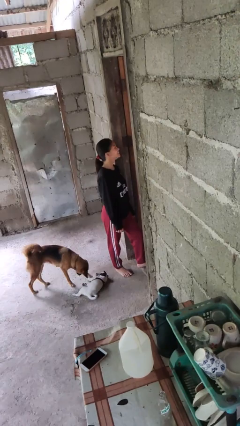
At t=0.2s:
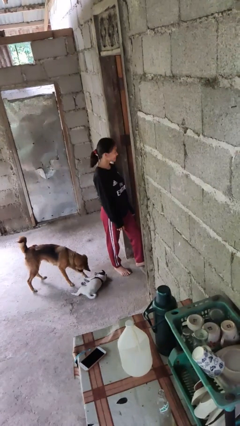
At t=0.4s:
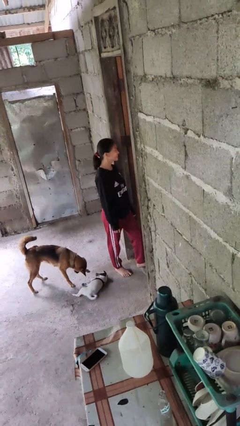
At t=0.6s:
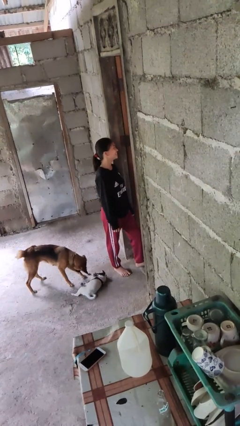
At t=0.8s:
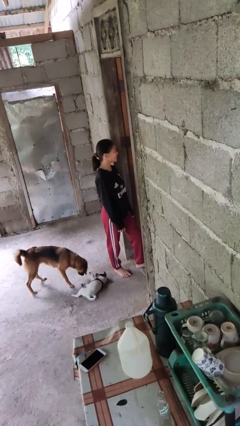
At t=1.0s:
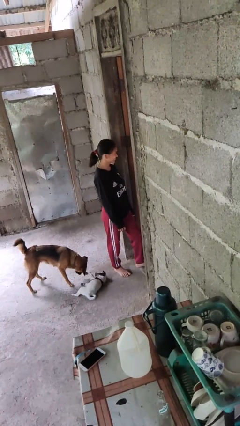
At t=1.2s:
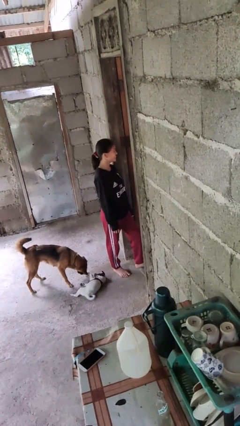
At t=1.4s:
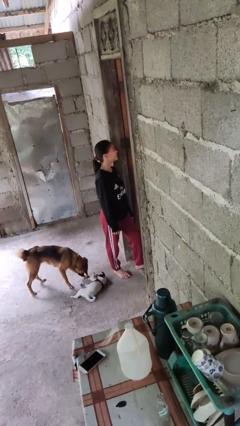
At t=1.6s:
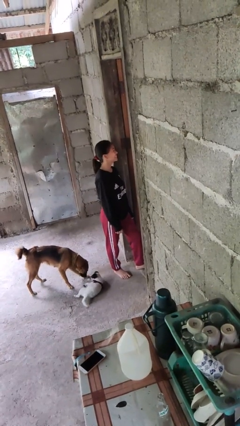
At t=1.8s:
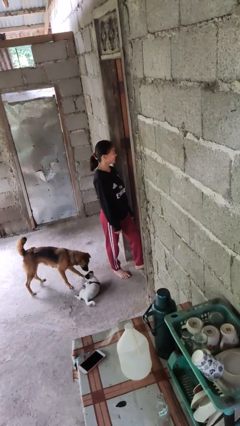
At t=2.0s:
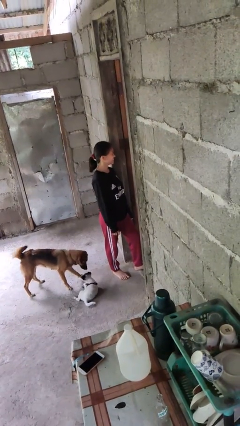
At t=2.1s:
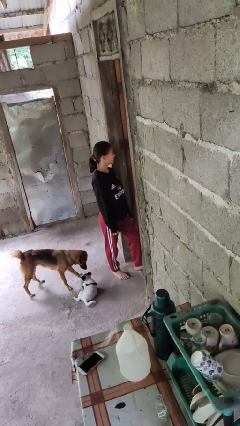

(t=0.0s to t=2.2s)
person nods head

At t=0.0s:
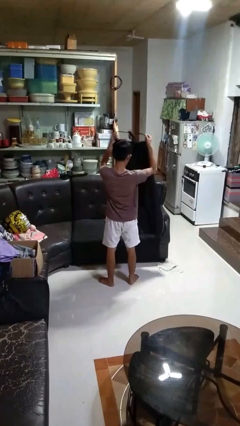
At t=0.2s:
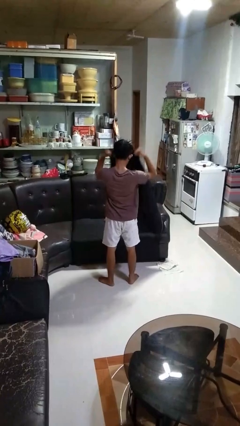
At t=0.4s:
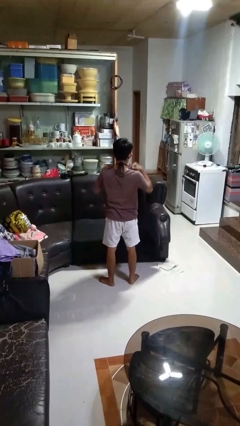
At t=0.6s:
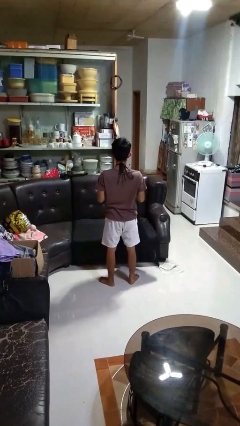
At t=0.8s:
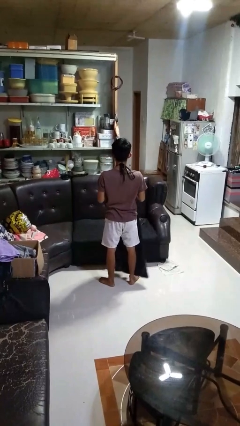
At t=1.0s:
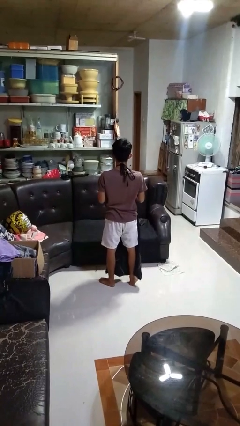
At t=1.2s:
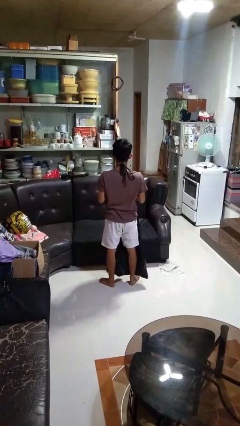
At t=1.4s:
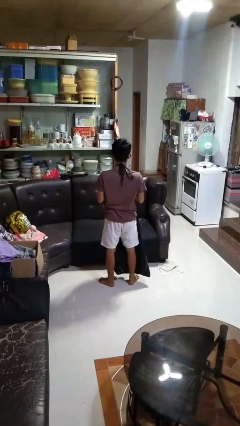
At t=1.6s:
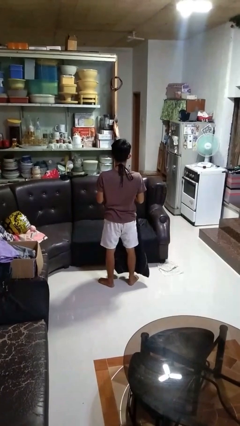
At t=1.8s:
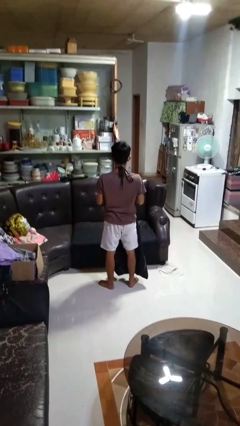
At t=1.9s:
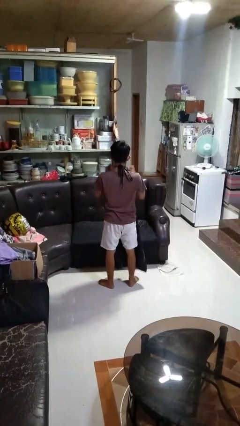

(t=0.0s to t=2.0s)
person puts on apron

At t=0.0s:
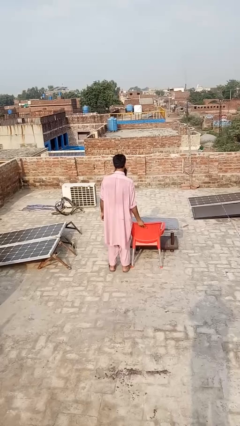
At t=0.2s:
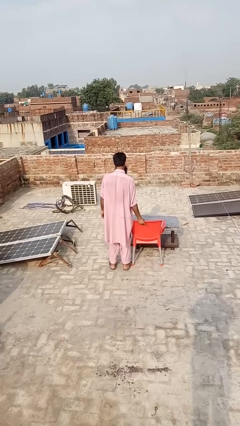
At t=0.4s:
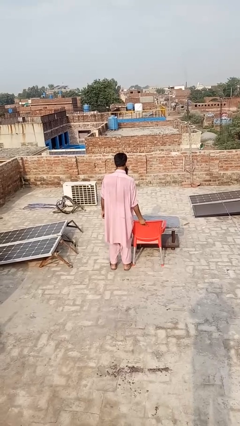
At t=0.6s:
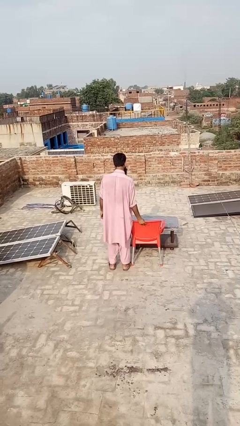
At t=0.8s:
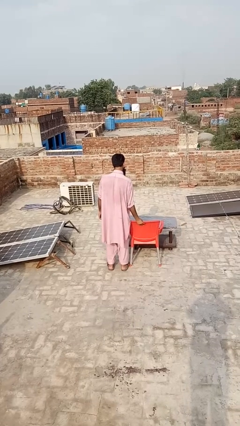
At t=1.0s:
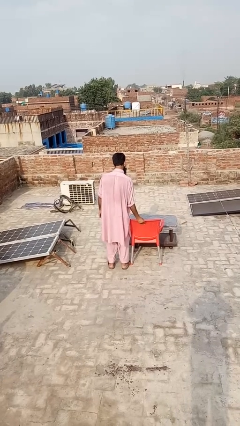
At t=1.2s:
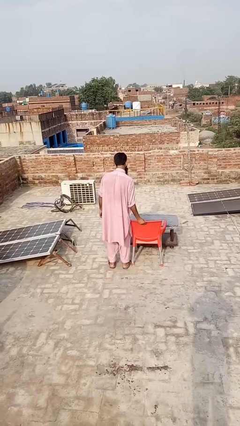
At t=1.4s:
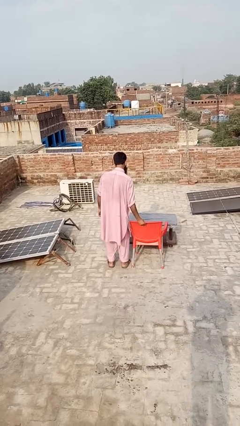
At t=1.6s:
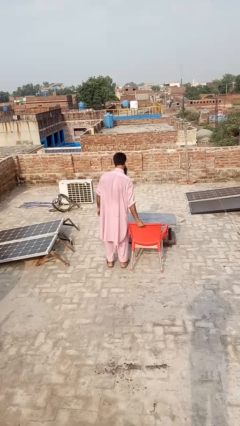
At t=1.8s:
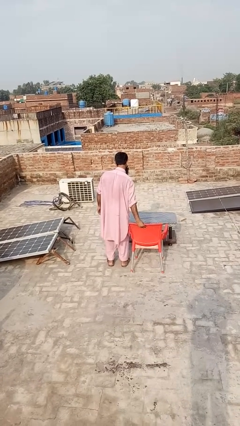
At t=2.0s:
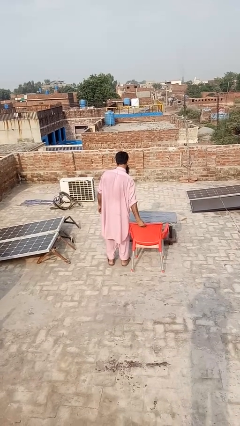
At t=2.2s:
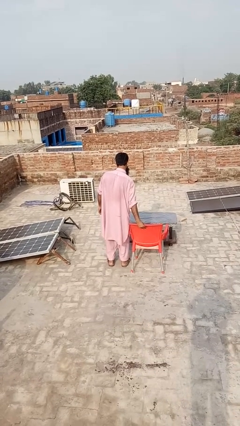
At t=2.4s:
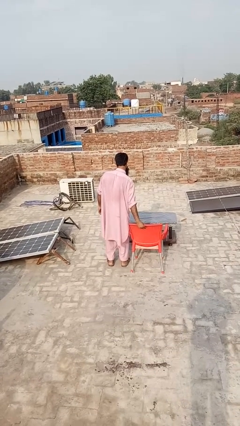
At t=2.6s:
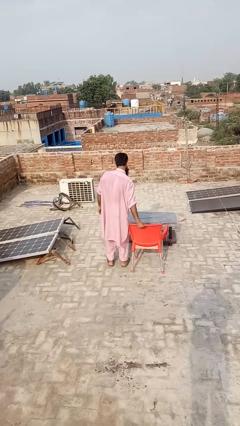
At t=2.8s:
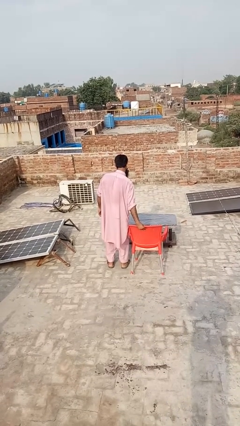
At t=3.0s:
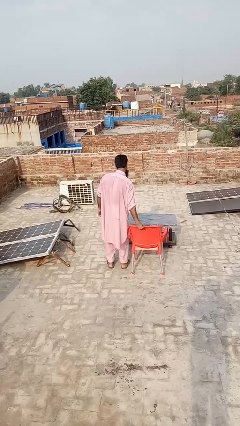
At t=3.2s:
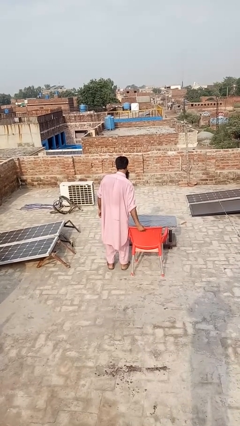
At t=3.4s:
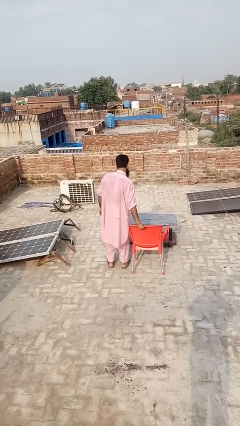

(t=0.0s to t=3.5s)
person pulls out chair

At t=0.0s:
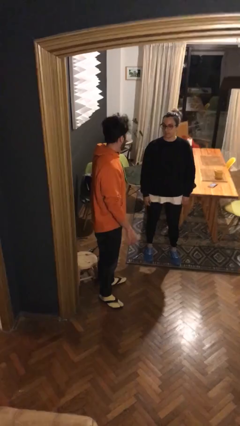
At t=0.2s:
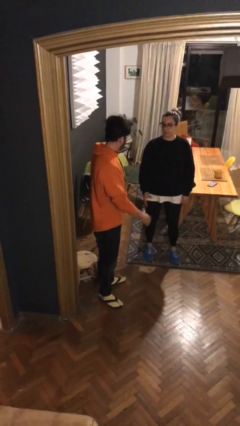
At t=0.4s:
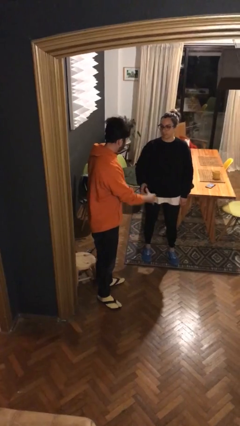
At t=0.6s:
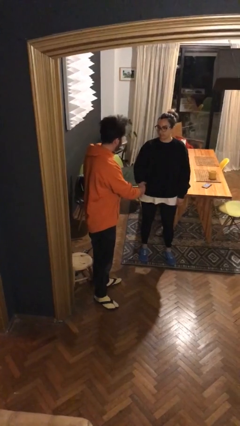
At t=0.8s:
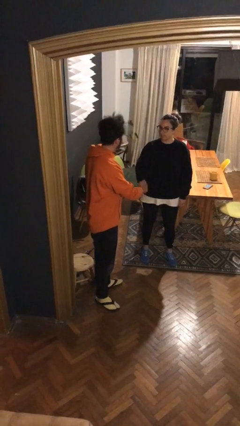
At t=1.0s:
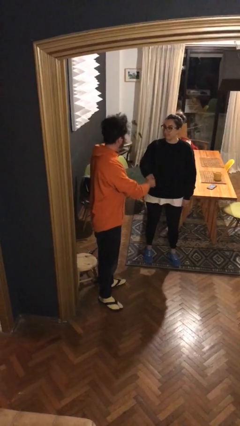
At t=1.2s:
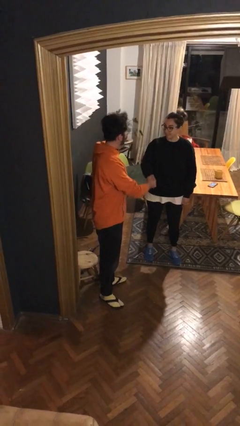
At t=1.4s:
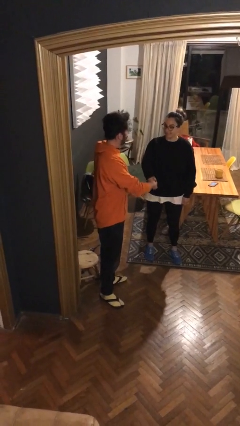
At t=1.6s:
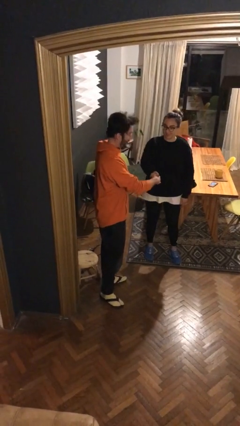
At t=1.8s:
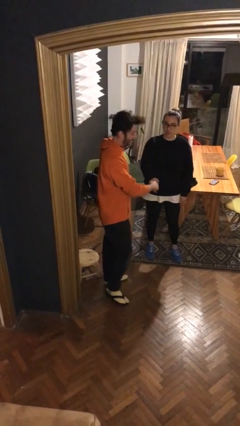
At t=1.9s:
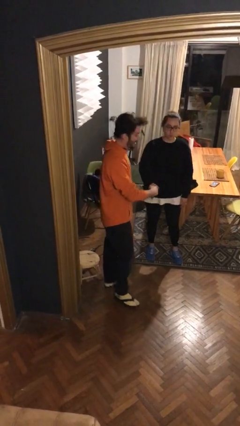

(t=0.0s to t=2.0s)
person shakes hand

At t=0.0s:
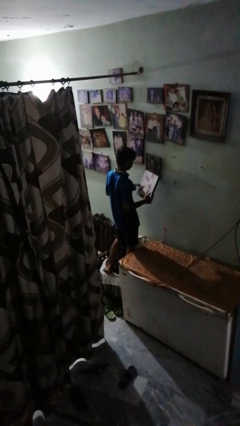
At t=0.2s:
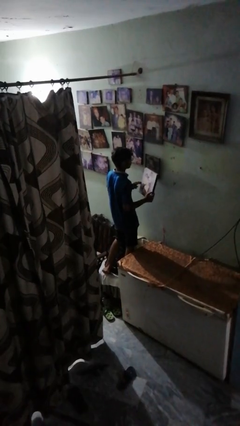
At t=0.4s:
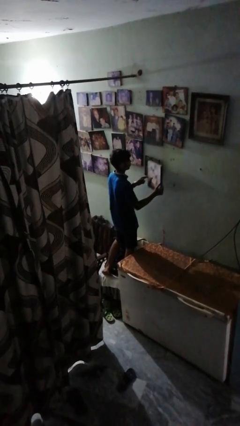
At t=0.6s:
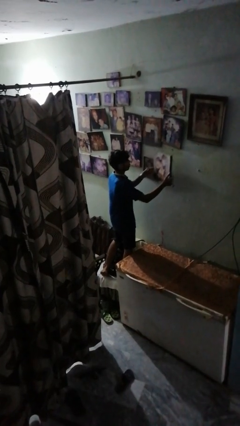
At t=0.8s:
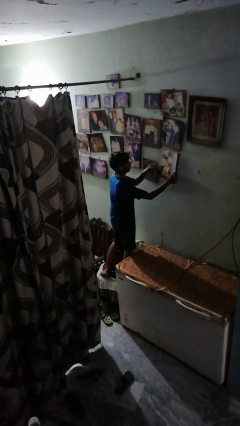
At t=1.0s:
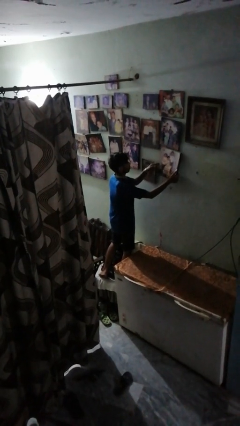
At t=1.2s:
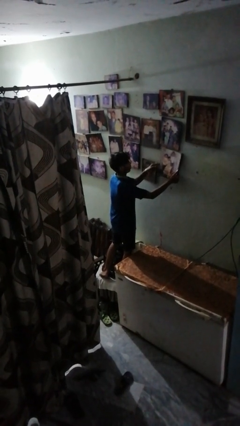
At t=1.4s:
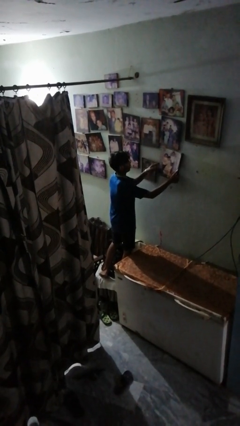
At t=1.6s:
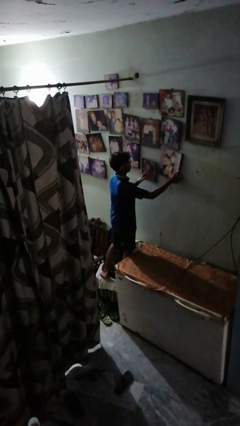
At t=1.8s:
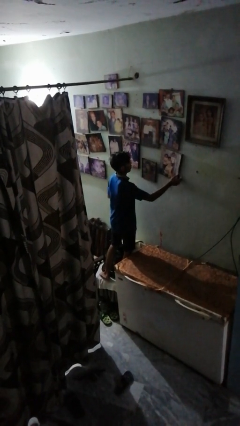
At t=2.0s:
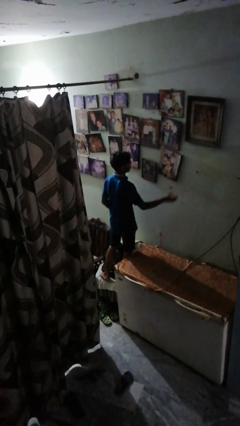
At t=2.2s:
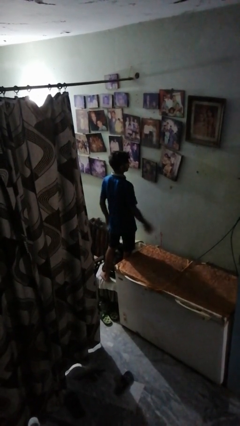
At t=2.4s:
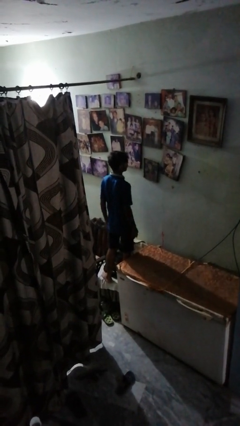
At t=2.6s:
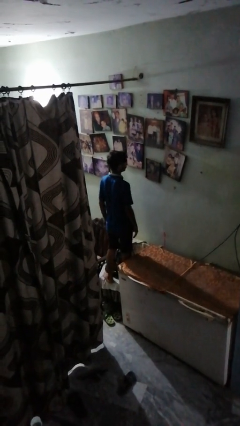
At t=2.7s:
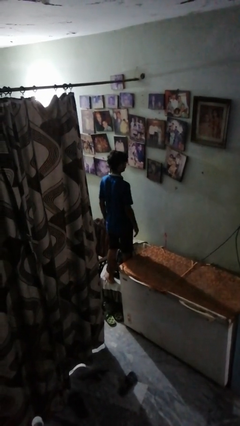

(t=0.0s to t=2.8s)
person puts up picture frame

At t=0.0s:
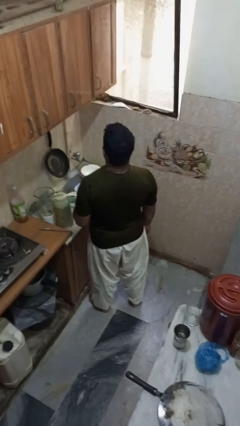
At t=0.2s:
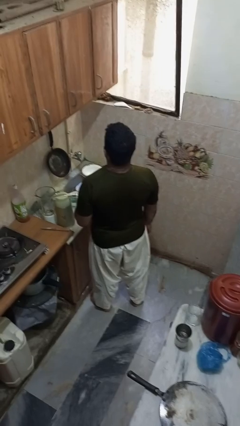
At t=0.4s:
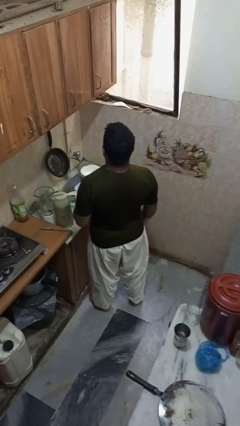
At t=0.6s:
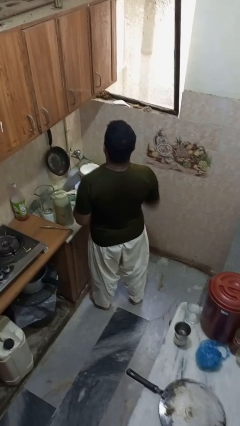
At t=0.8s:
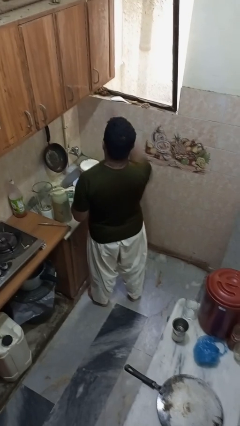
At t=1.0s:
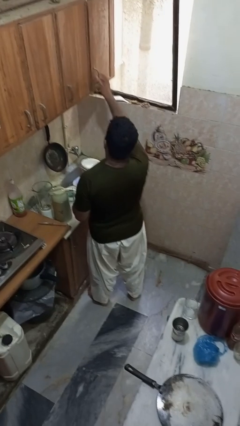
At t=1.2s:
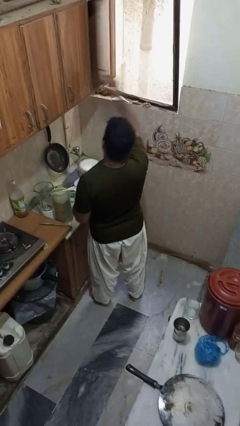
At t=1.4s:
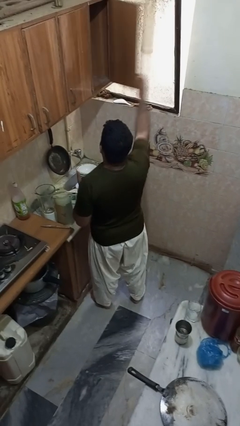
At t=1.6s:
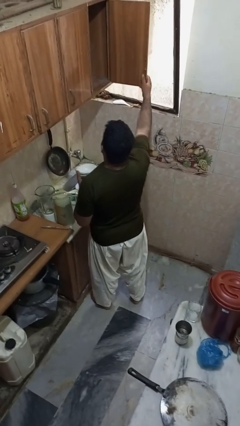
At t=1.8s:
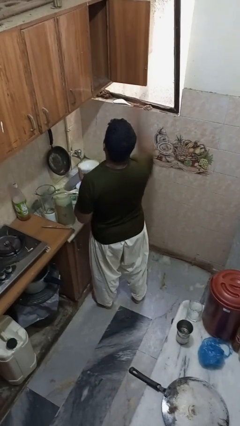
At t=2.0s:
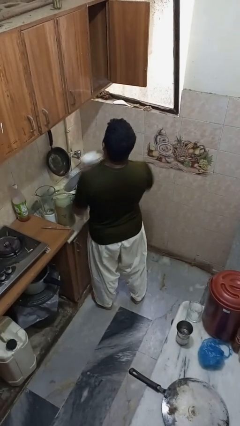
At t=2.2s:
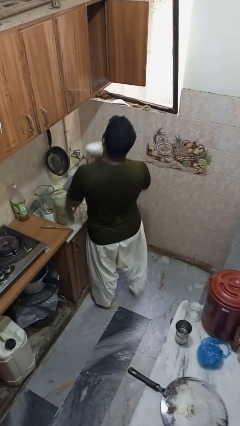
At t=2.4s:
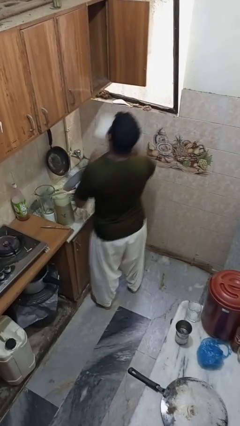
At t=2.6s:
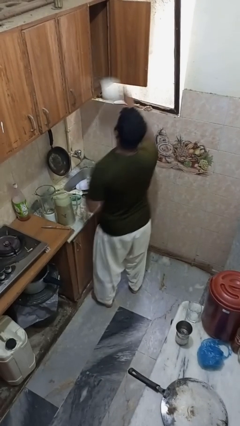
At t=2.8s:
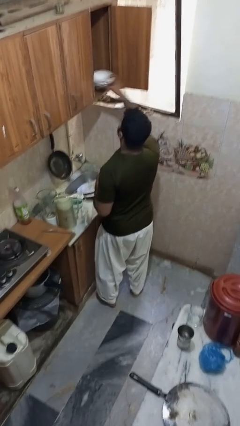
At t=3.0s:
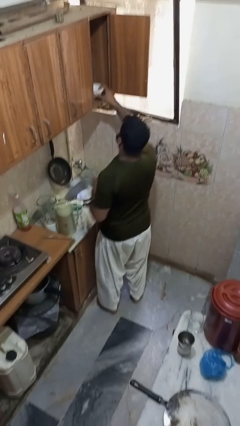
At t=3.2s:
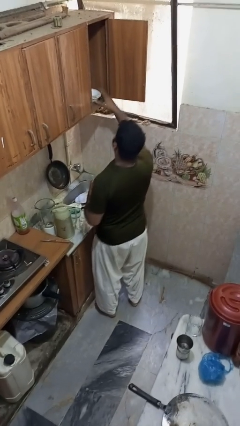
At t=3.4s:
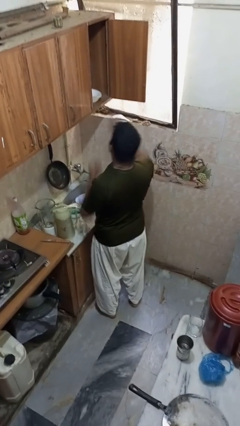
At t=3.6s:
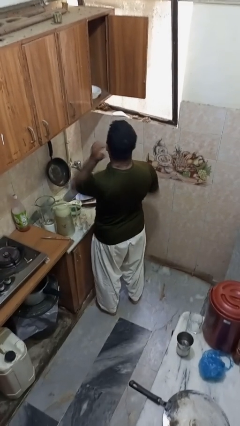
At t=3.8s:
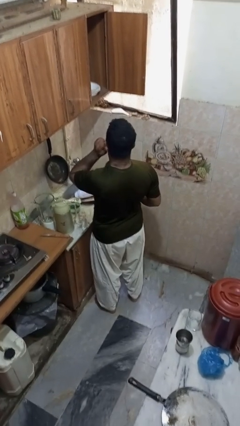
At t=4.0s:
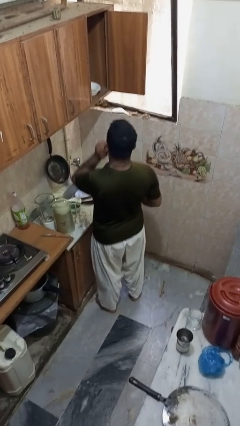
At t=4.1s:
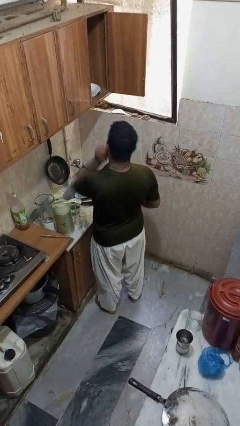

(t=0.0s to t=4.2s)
person puts object in cabinet

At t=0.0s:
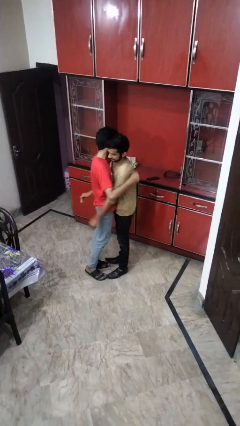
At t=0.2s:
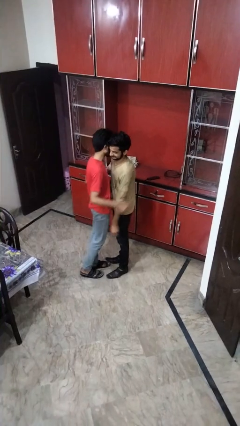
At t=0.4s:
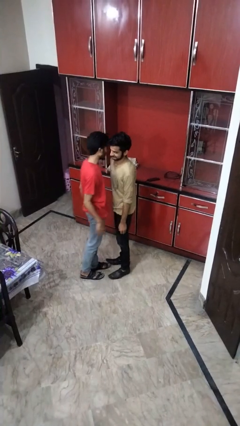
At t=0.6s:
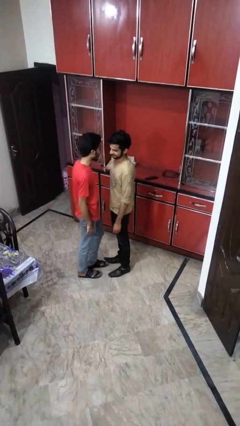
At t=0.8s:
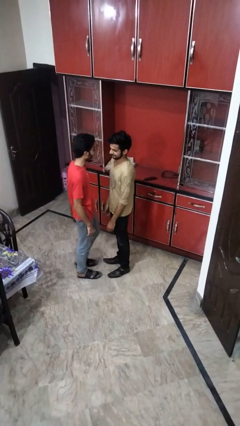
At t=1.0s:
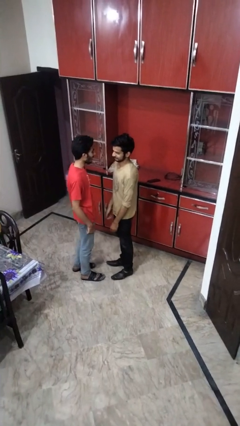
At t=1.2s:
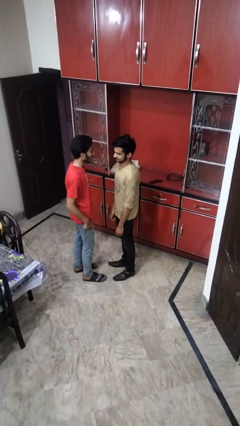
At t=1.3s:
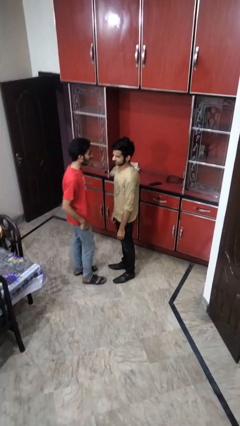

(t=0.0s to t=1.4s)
person puts down person
